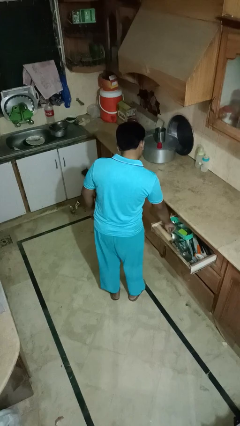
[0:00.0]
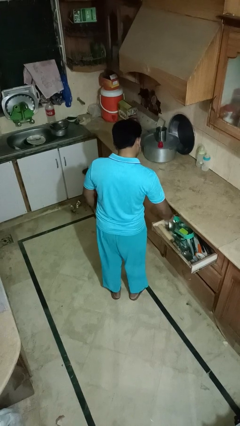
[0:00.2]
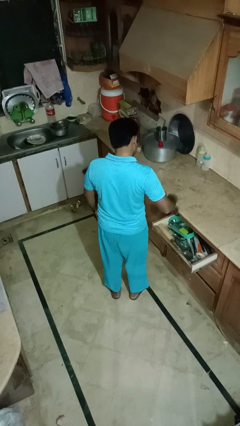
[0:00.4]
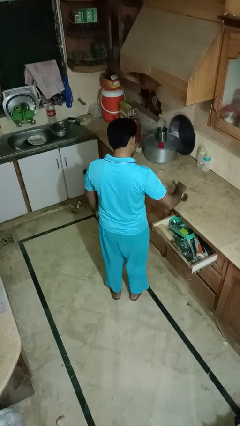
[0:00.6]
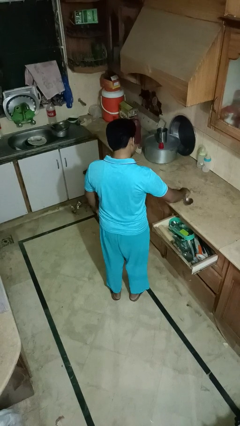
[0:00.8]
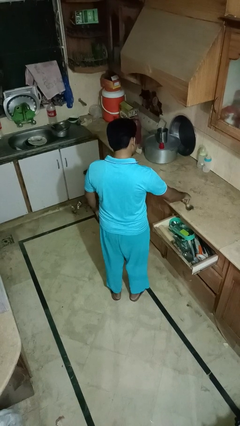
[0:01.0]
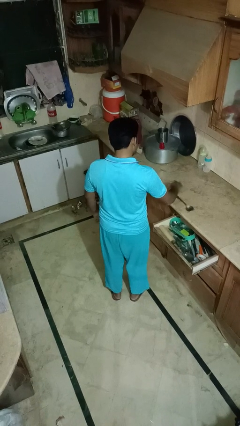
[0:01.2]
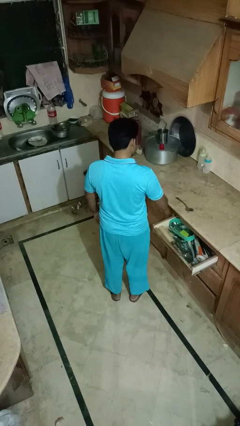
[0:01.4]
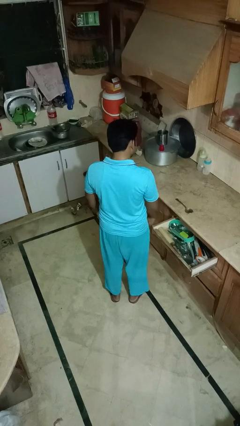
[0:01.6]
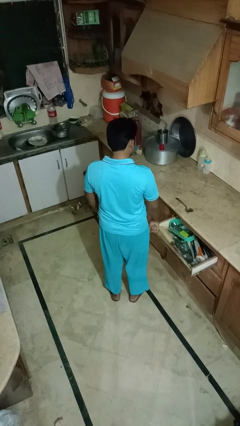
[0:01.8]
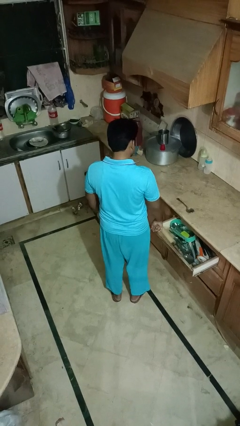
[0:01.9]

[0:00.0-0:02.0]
person takes object from kitchen drawer

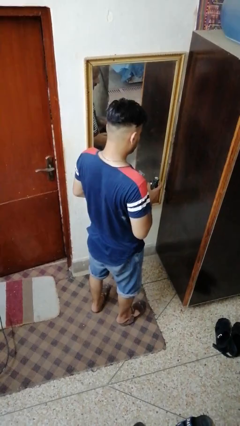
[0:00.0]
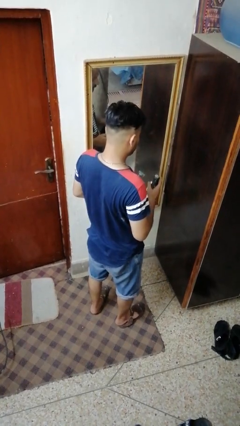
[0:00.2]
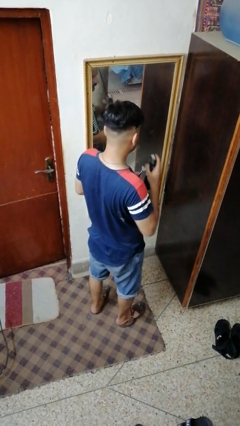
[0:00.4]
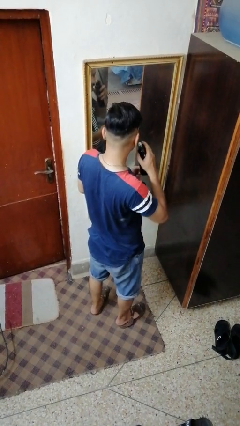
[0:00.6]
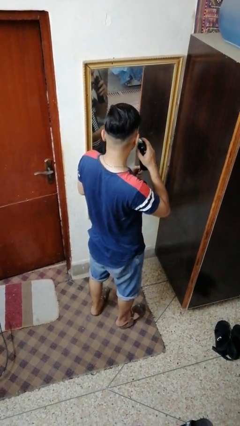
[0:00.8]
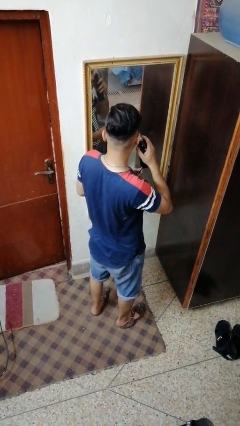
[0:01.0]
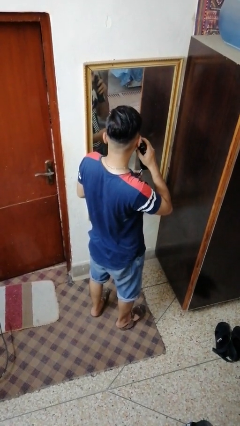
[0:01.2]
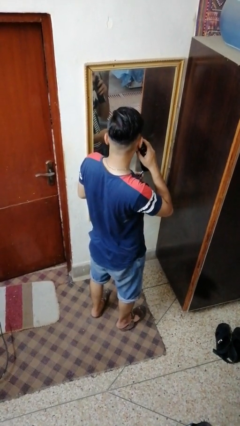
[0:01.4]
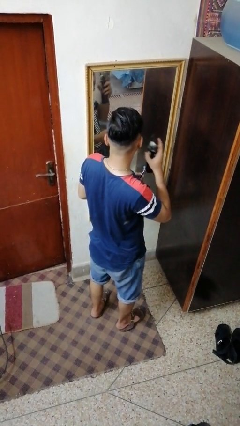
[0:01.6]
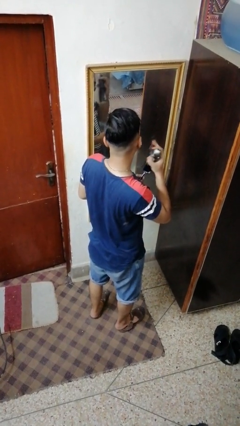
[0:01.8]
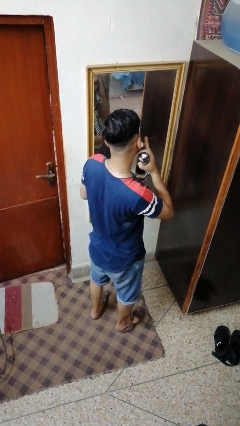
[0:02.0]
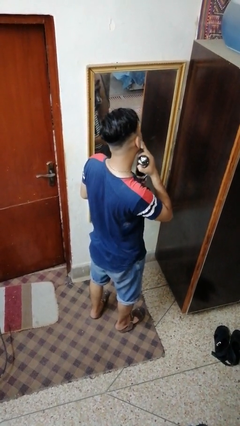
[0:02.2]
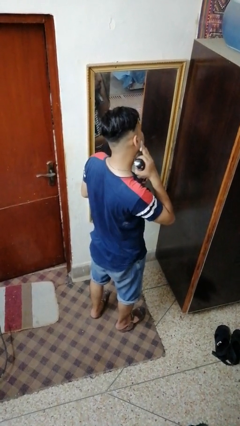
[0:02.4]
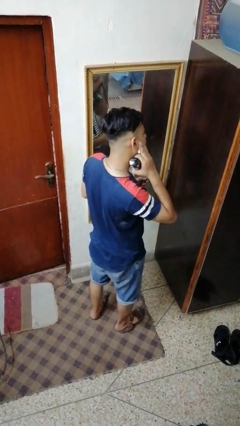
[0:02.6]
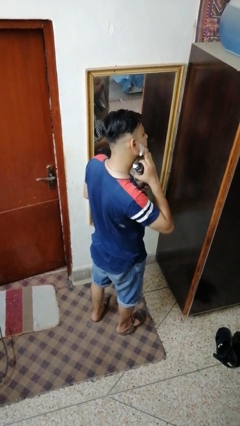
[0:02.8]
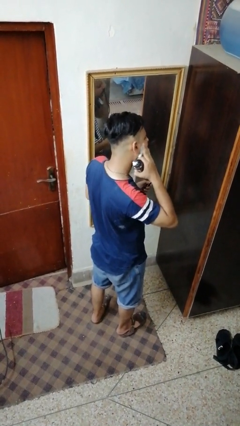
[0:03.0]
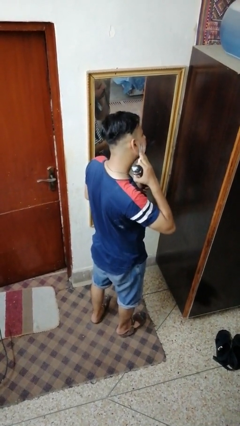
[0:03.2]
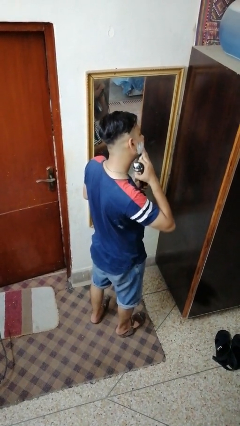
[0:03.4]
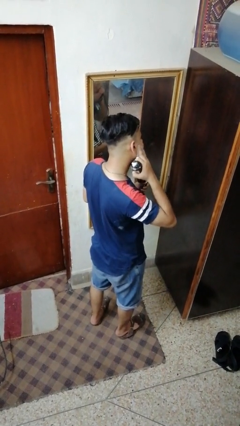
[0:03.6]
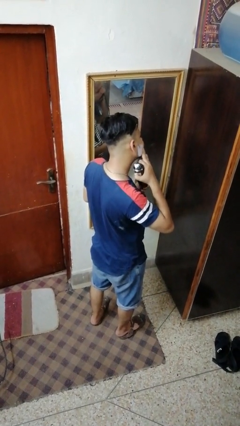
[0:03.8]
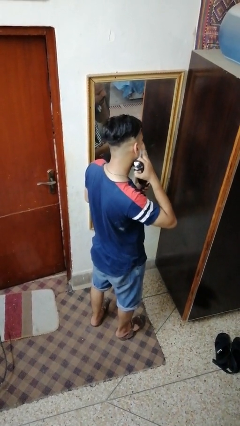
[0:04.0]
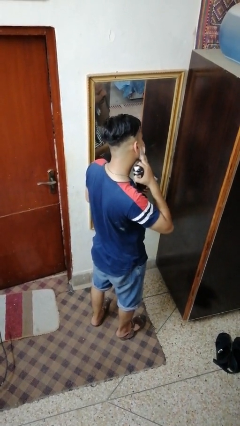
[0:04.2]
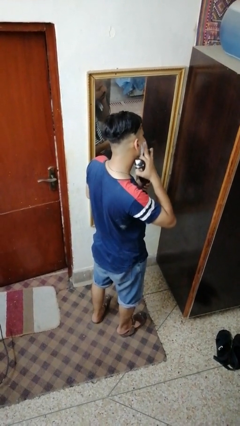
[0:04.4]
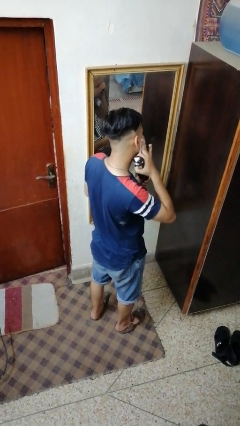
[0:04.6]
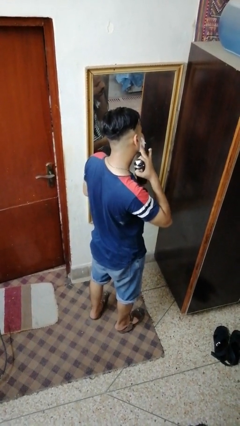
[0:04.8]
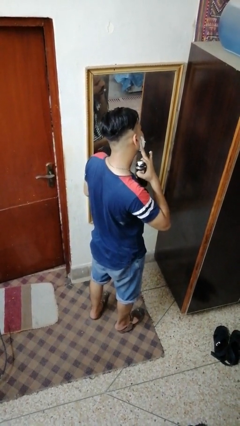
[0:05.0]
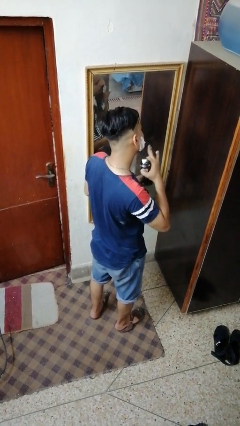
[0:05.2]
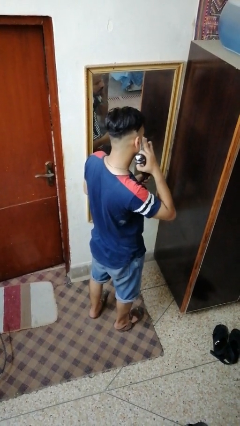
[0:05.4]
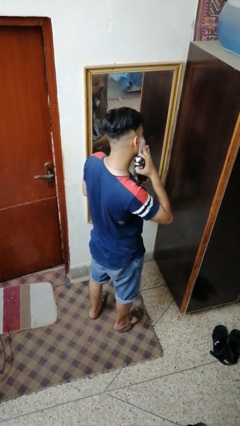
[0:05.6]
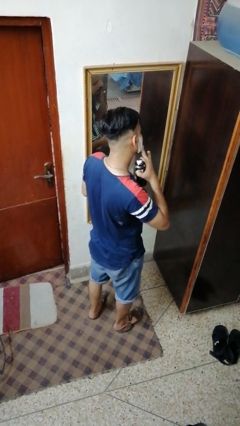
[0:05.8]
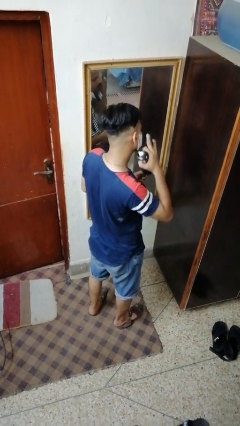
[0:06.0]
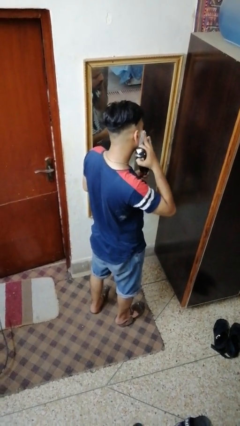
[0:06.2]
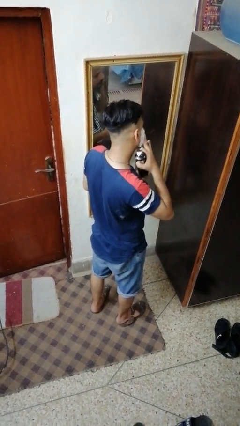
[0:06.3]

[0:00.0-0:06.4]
person applies shaving cream

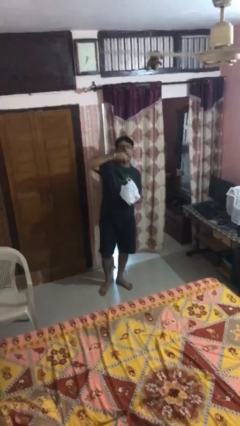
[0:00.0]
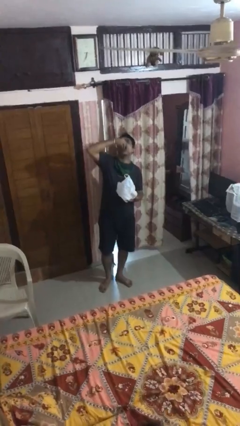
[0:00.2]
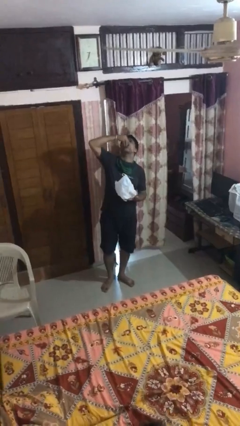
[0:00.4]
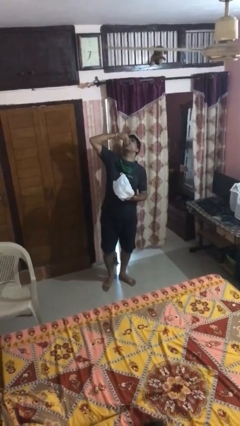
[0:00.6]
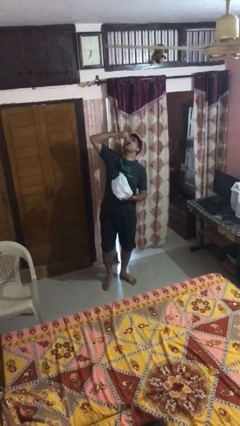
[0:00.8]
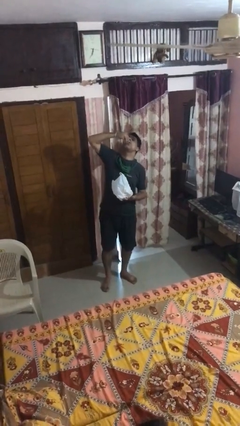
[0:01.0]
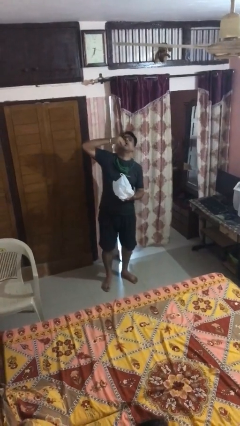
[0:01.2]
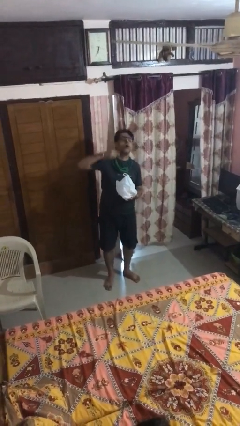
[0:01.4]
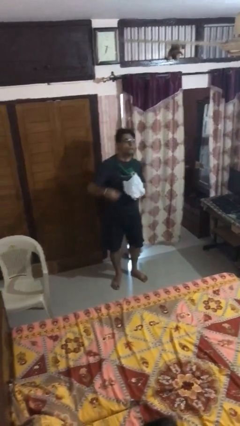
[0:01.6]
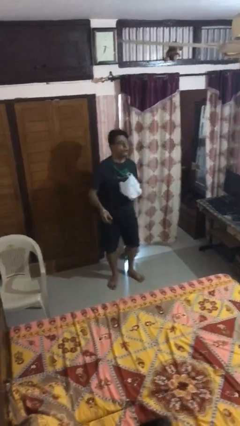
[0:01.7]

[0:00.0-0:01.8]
person eats snack from bag

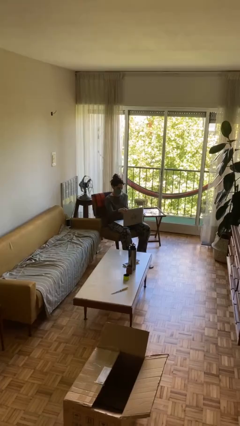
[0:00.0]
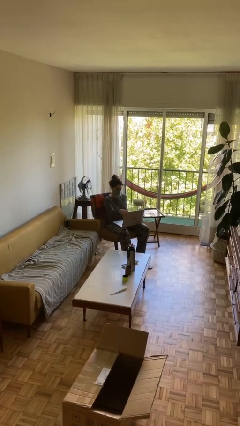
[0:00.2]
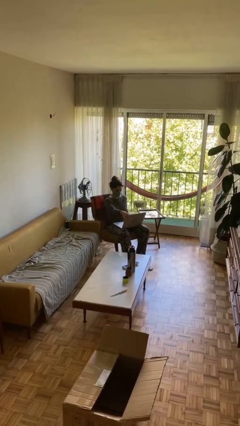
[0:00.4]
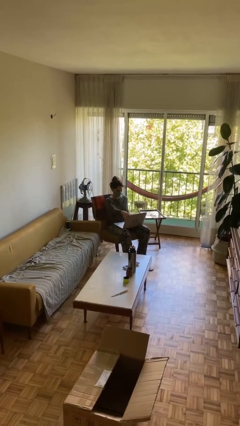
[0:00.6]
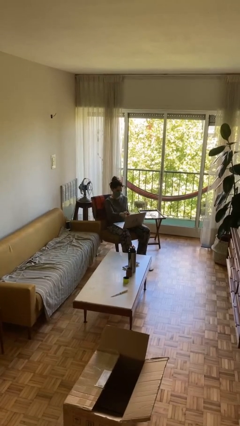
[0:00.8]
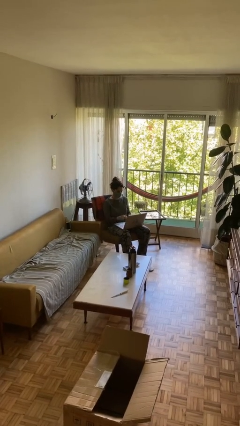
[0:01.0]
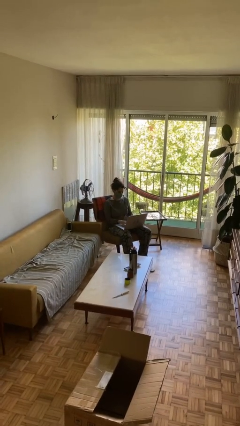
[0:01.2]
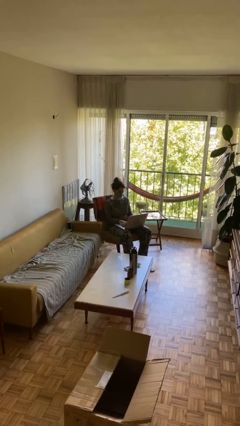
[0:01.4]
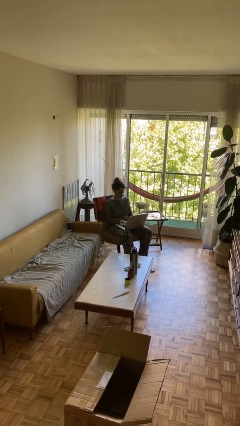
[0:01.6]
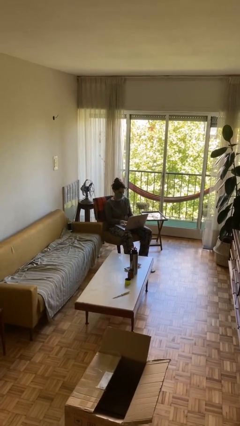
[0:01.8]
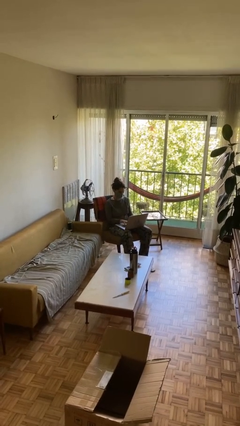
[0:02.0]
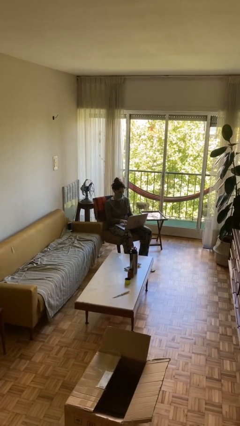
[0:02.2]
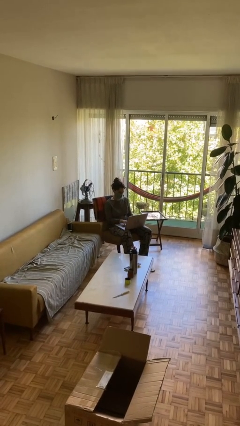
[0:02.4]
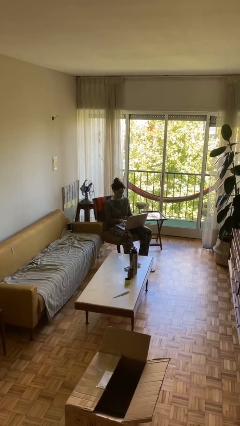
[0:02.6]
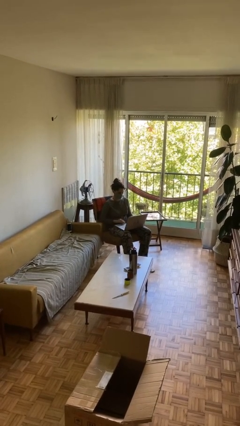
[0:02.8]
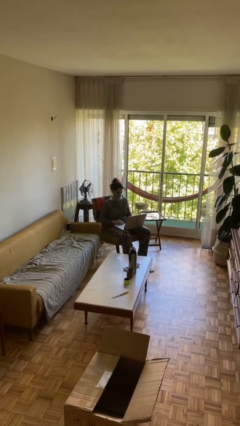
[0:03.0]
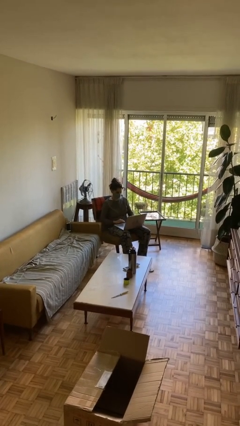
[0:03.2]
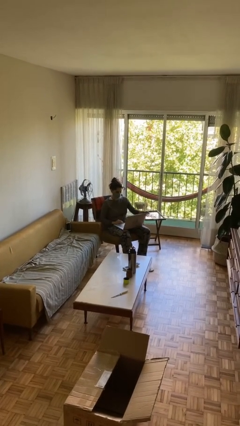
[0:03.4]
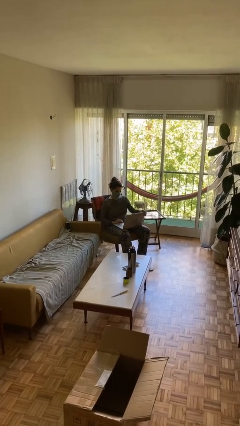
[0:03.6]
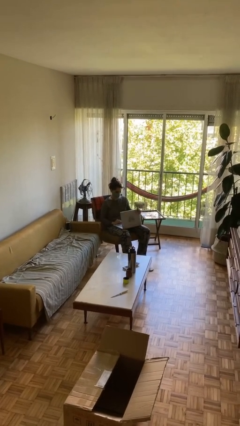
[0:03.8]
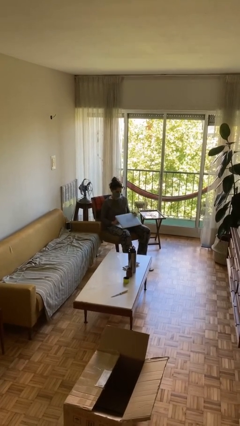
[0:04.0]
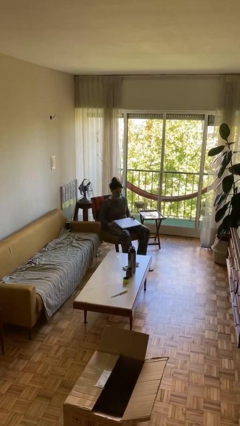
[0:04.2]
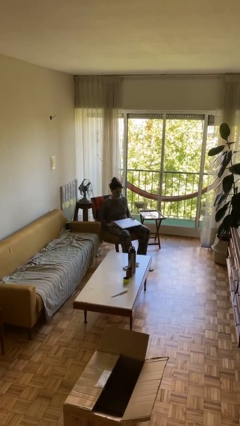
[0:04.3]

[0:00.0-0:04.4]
person interacts with laptop

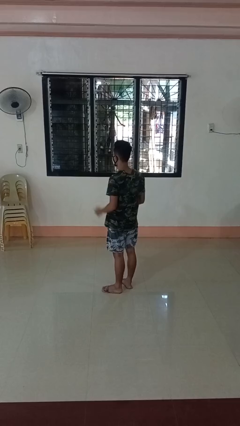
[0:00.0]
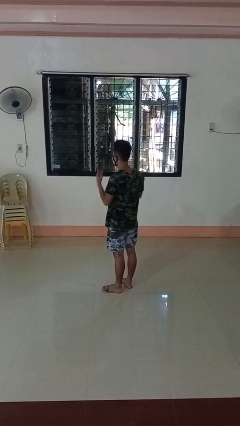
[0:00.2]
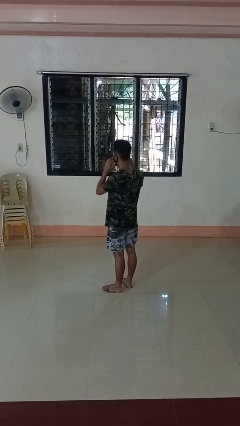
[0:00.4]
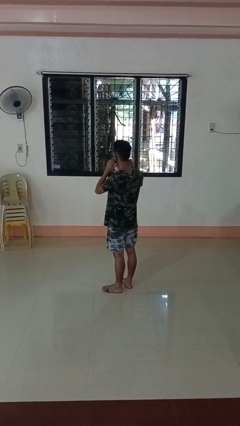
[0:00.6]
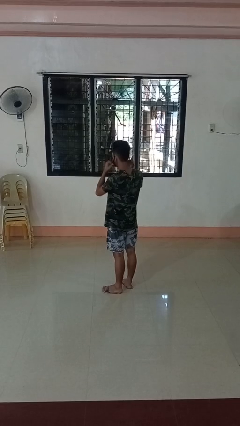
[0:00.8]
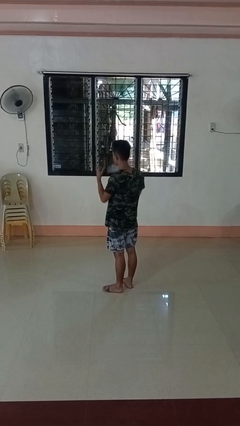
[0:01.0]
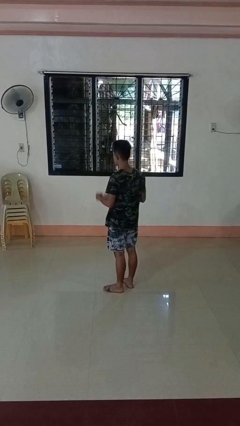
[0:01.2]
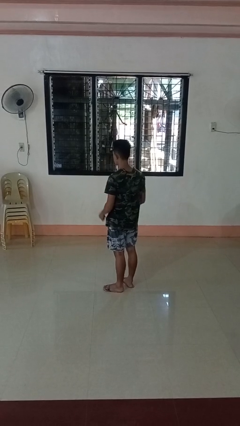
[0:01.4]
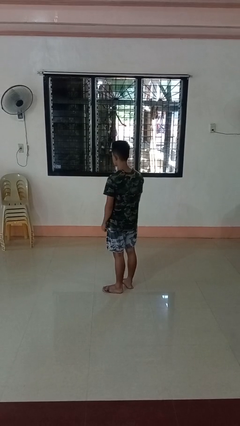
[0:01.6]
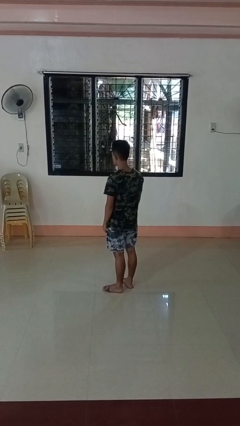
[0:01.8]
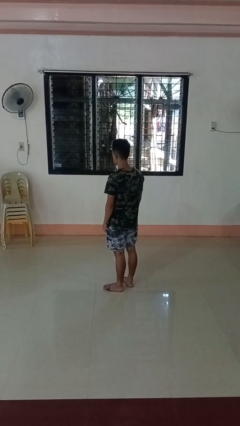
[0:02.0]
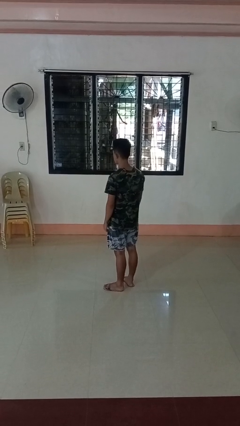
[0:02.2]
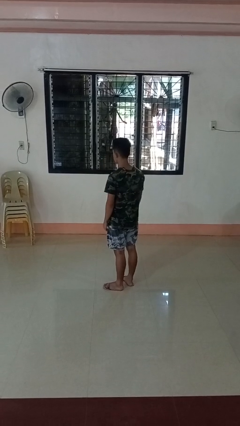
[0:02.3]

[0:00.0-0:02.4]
person takes off facemask

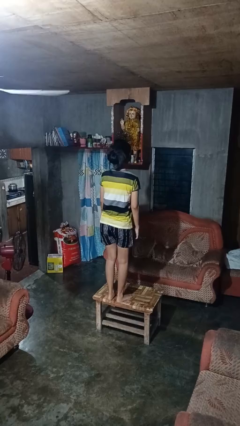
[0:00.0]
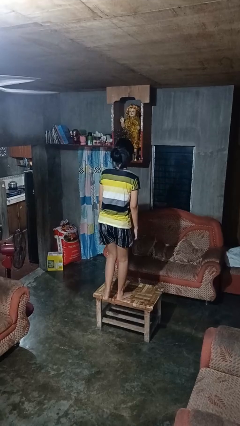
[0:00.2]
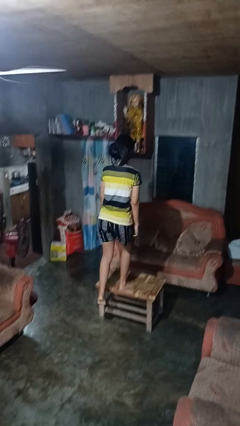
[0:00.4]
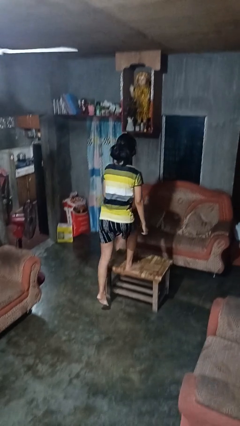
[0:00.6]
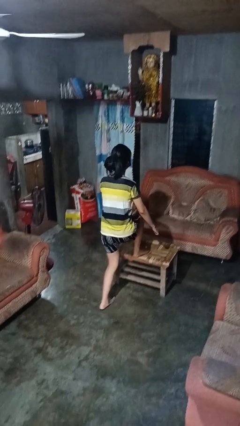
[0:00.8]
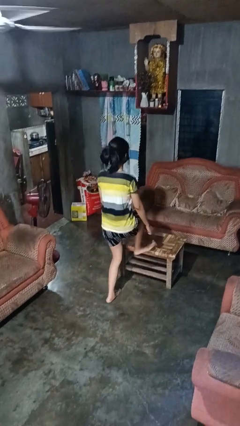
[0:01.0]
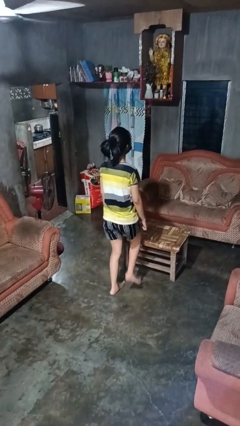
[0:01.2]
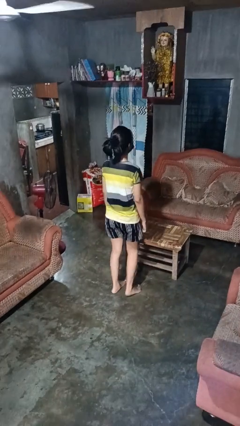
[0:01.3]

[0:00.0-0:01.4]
person climbs off table
